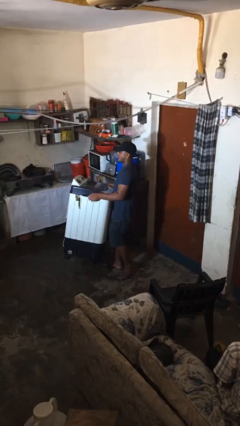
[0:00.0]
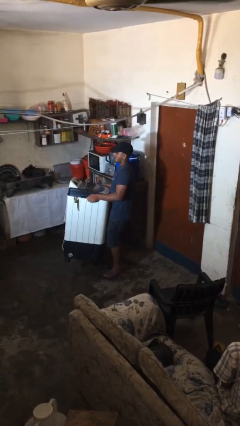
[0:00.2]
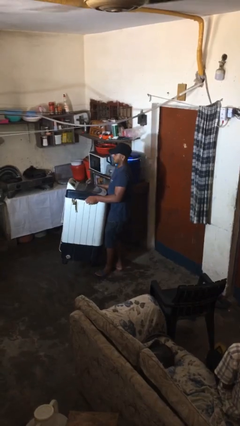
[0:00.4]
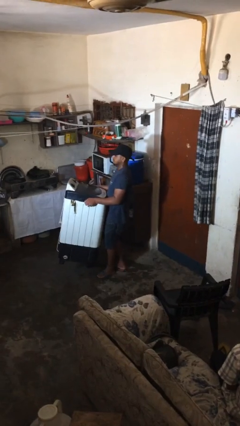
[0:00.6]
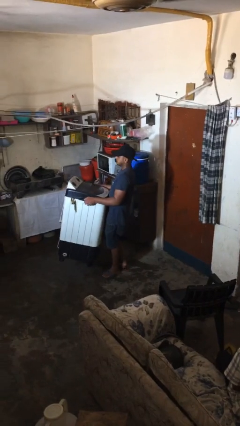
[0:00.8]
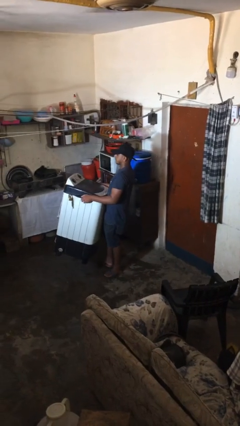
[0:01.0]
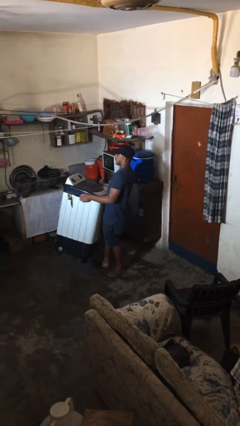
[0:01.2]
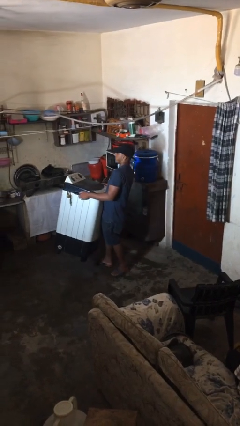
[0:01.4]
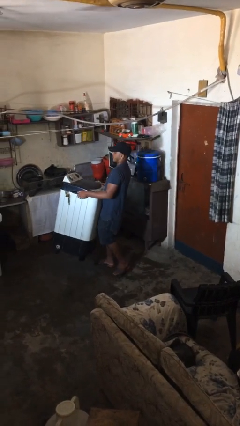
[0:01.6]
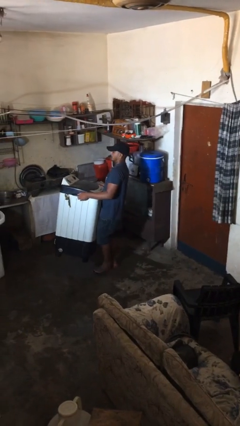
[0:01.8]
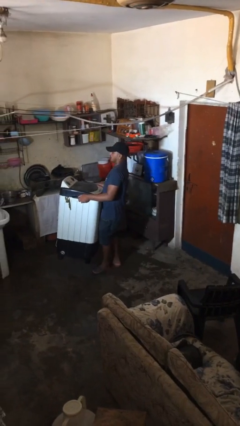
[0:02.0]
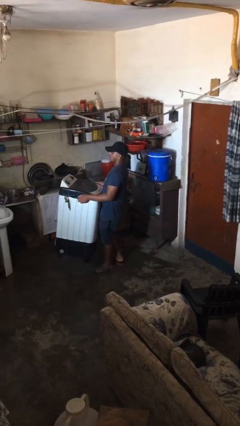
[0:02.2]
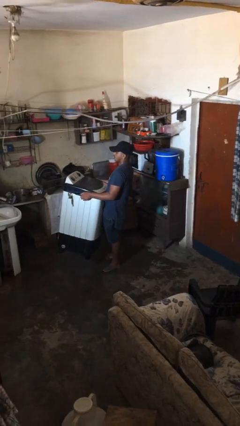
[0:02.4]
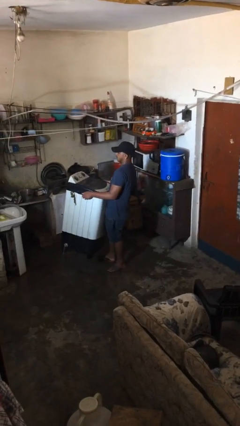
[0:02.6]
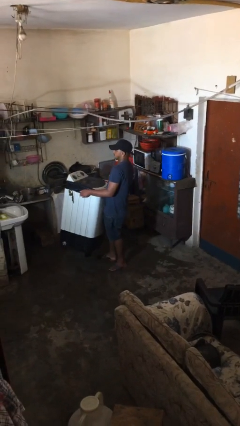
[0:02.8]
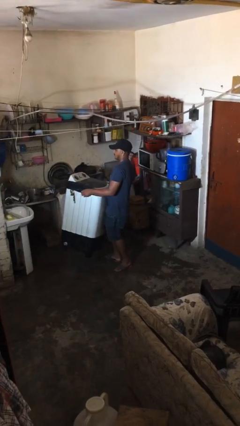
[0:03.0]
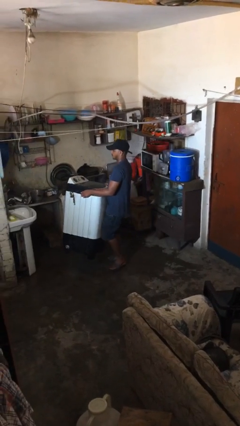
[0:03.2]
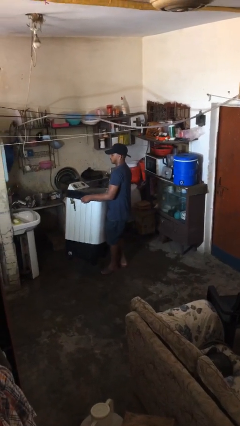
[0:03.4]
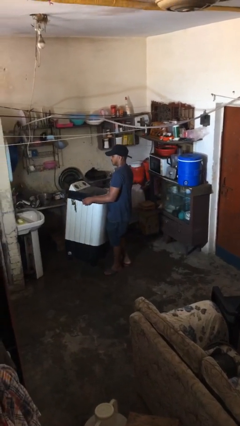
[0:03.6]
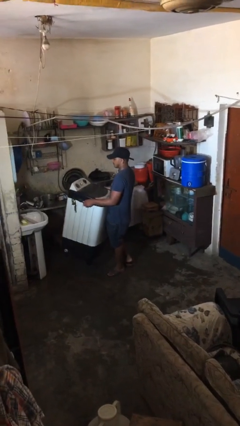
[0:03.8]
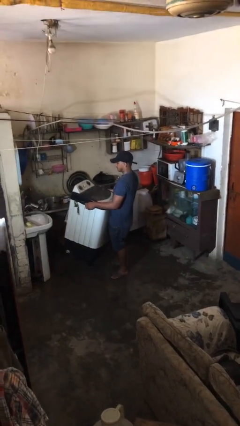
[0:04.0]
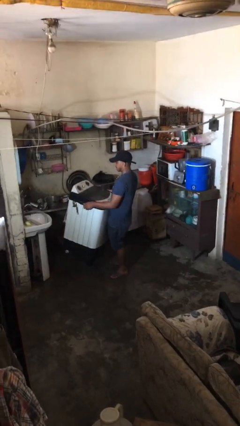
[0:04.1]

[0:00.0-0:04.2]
person carries heavy object

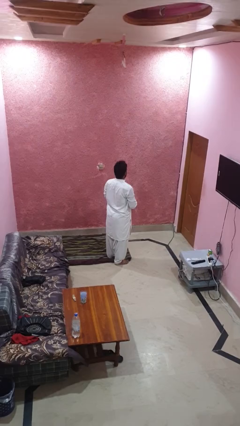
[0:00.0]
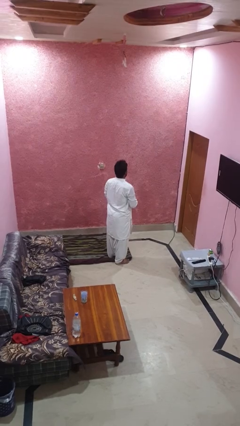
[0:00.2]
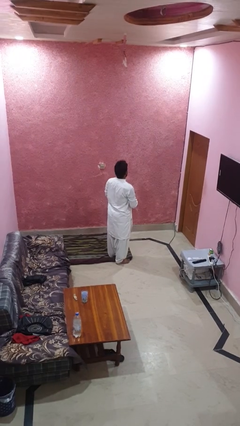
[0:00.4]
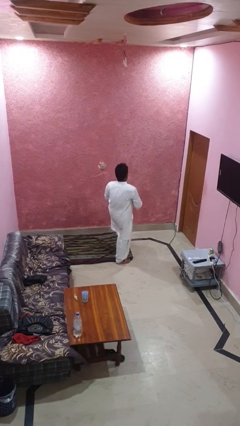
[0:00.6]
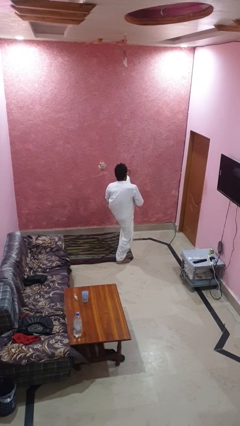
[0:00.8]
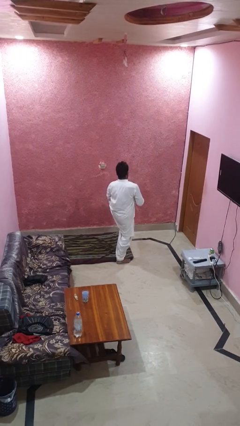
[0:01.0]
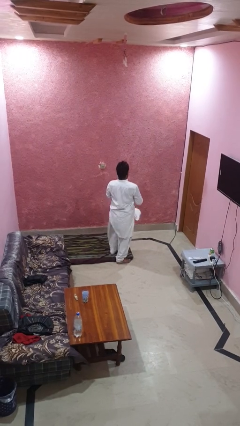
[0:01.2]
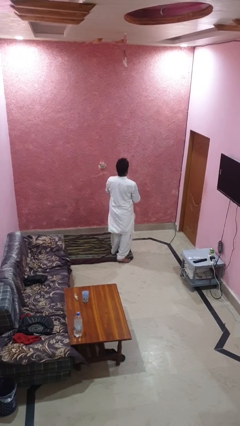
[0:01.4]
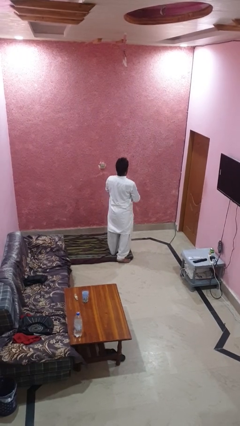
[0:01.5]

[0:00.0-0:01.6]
person karate kicks

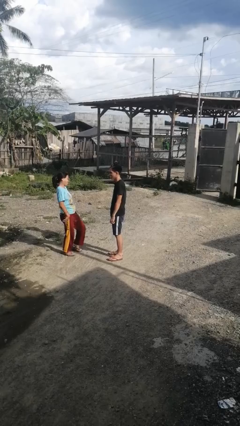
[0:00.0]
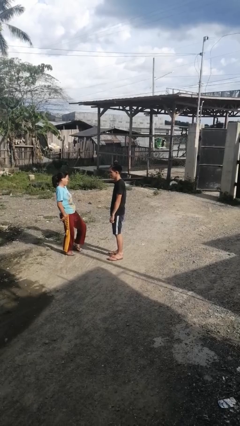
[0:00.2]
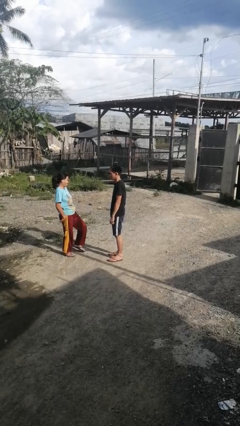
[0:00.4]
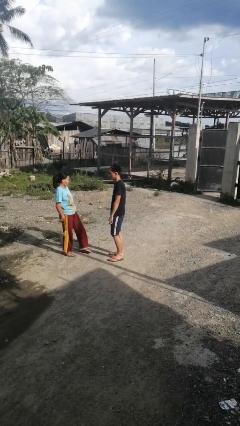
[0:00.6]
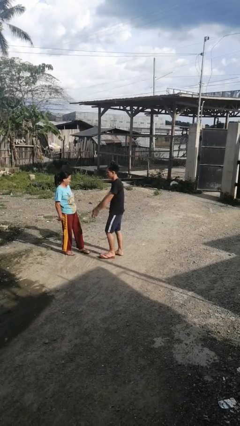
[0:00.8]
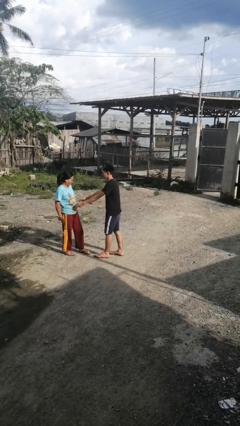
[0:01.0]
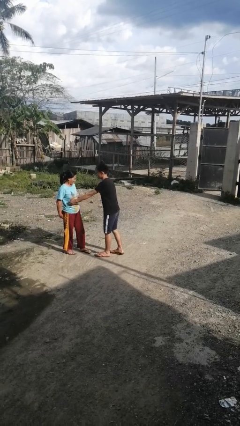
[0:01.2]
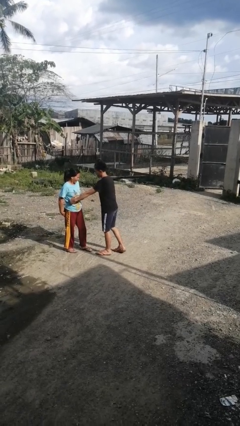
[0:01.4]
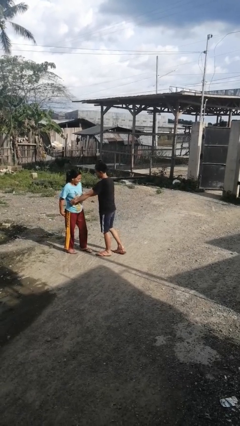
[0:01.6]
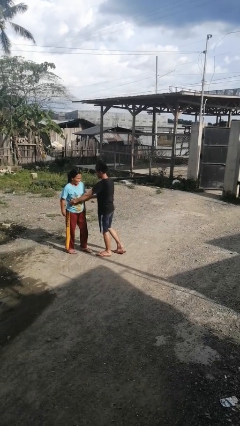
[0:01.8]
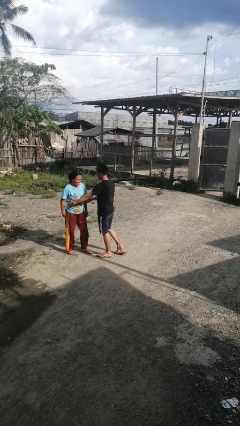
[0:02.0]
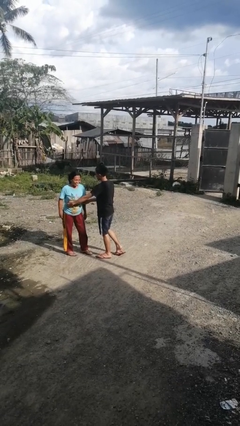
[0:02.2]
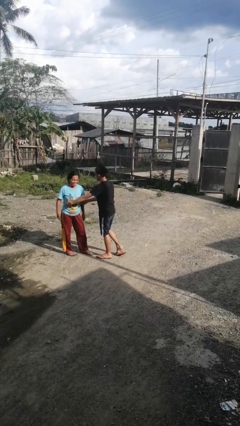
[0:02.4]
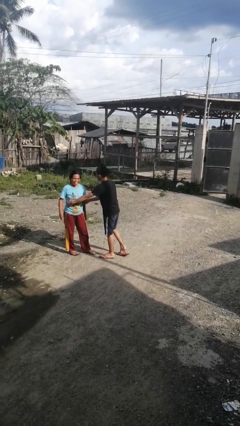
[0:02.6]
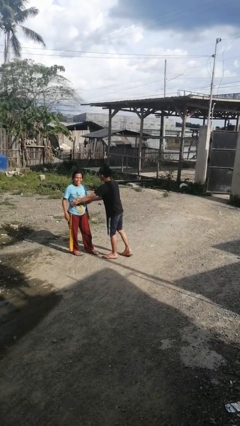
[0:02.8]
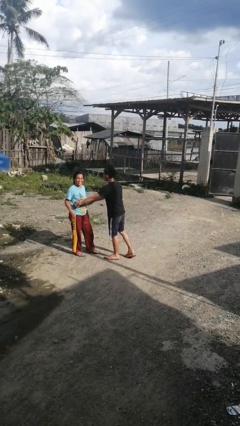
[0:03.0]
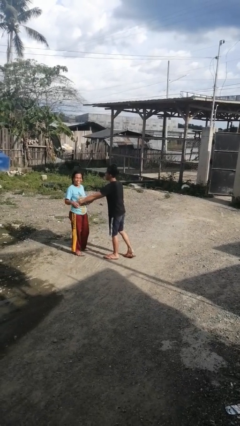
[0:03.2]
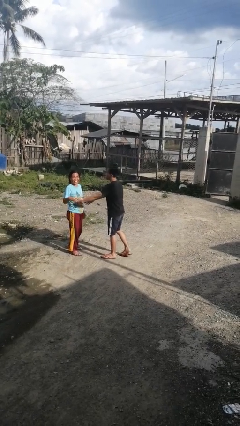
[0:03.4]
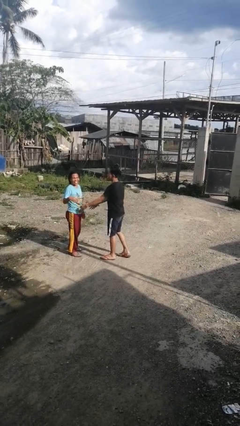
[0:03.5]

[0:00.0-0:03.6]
person tickles person

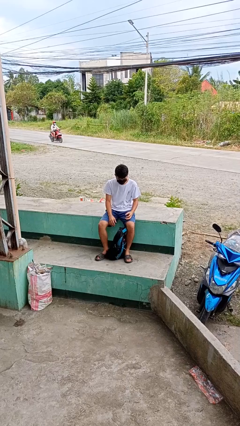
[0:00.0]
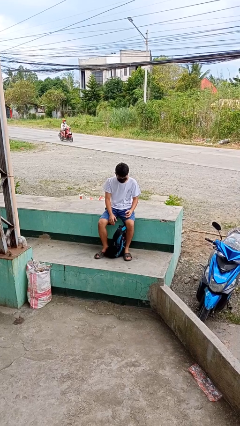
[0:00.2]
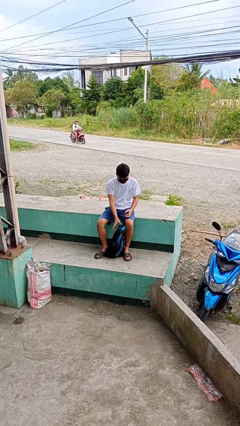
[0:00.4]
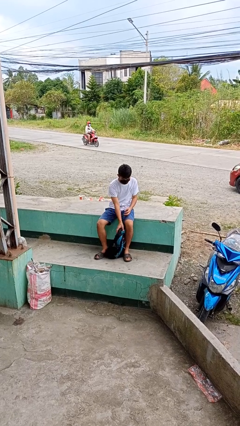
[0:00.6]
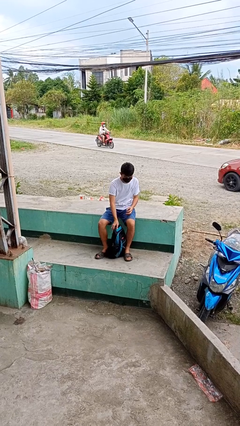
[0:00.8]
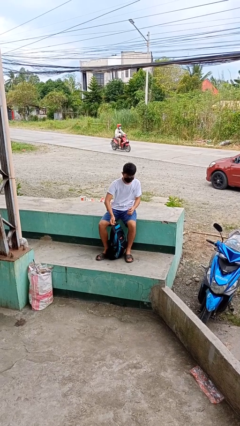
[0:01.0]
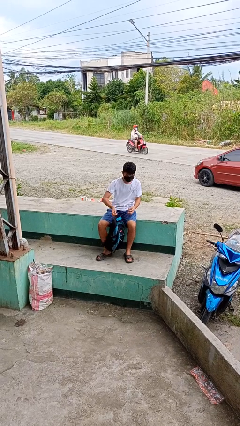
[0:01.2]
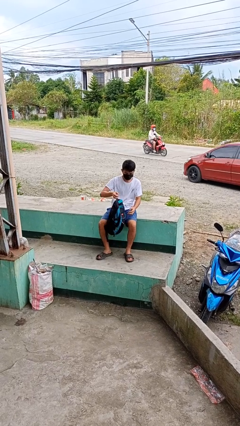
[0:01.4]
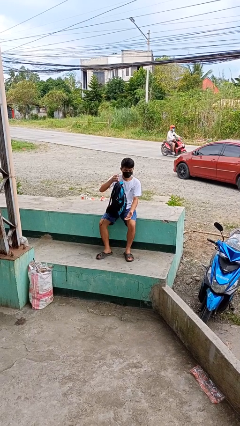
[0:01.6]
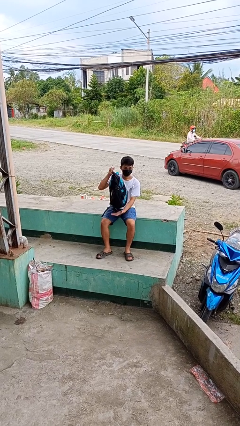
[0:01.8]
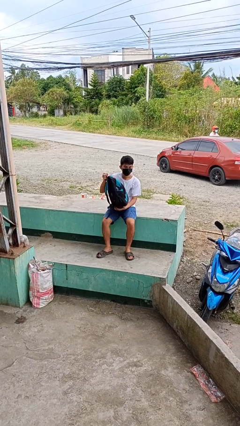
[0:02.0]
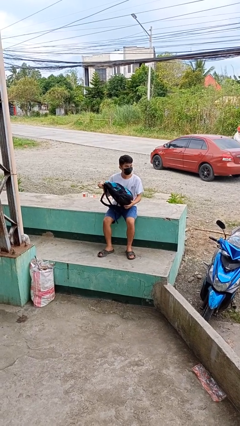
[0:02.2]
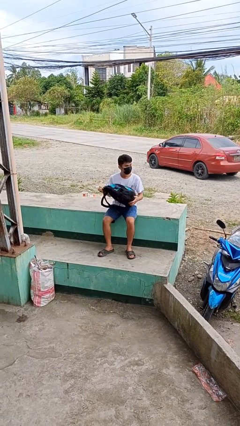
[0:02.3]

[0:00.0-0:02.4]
person picks up object from floor

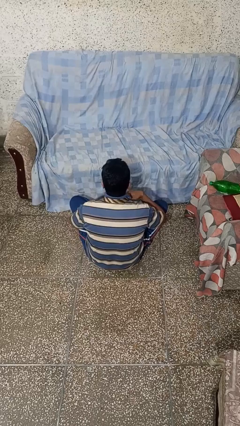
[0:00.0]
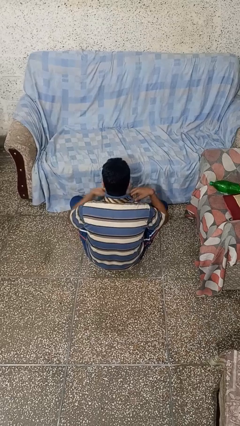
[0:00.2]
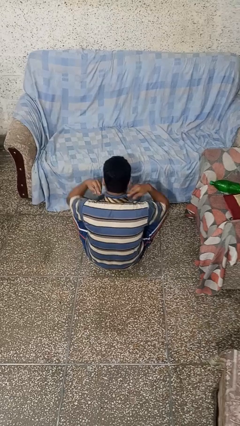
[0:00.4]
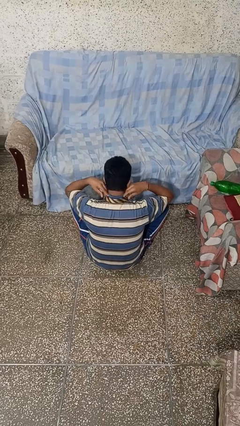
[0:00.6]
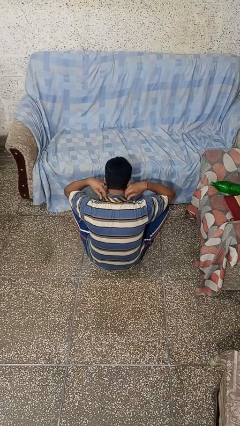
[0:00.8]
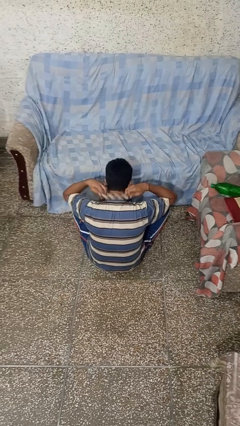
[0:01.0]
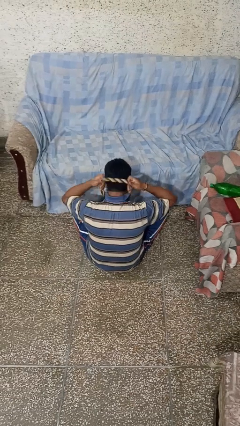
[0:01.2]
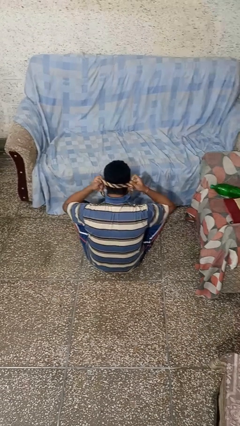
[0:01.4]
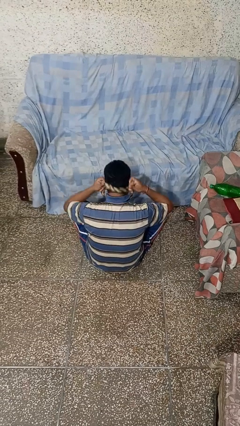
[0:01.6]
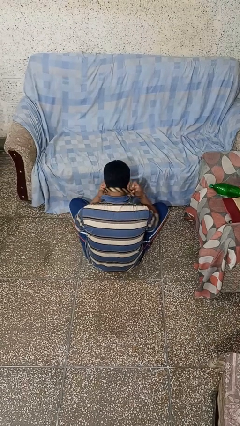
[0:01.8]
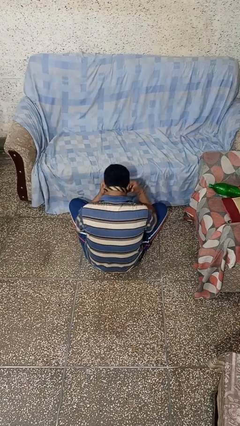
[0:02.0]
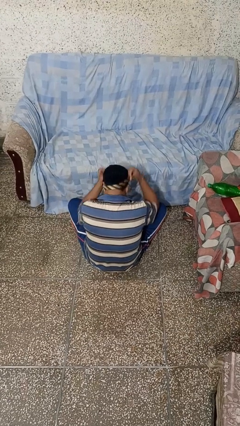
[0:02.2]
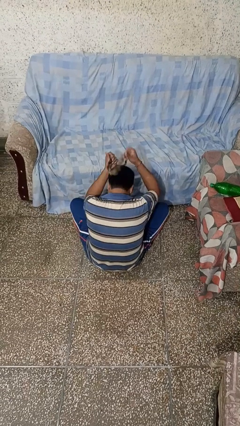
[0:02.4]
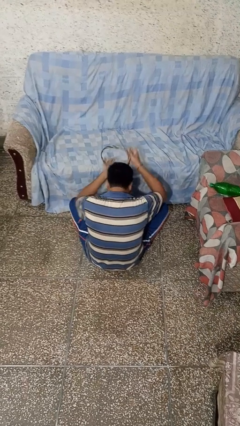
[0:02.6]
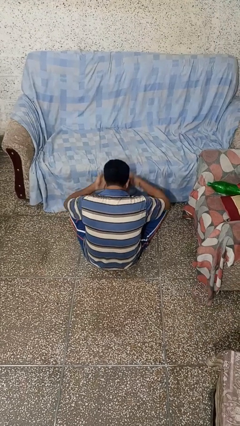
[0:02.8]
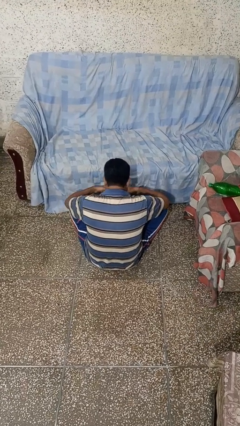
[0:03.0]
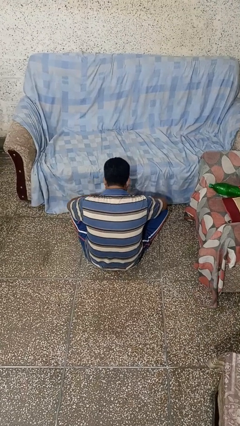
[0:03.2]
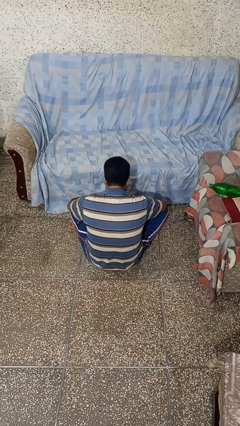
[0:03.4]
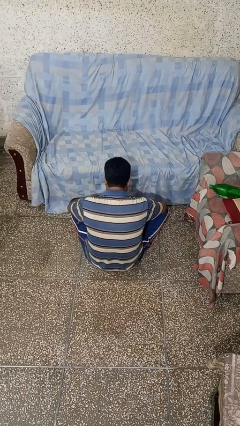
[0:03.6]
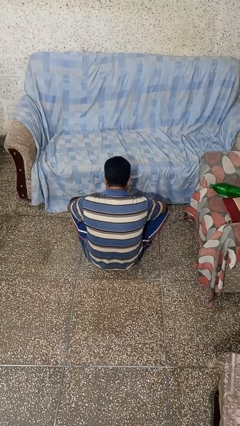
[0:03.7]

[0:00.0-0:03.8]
person takes off necktie

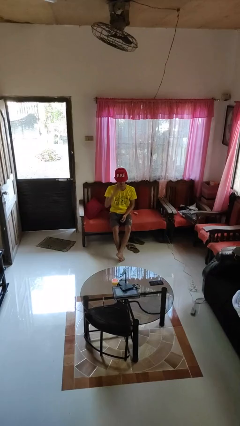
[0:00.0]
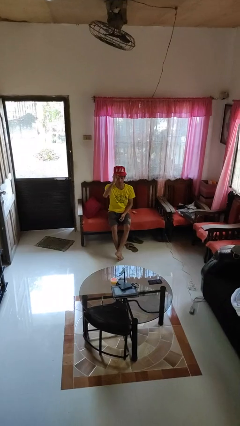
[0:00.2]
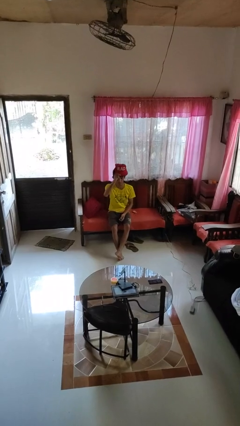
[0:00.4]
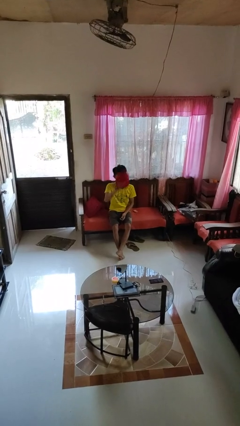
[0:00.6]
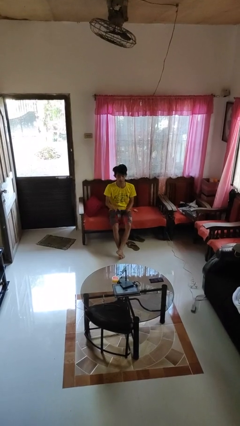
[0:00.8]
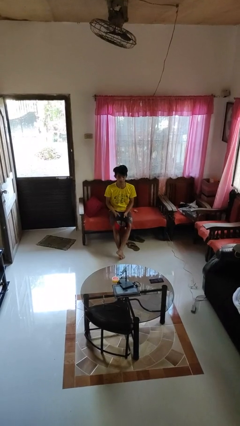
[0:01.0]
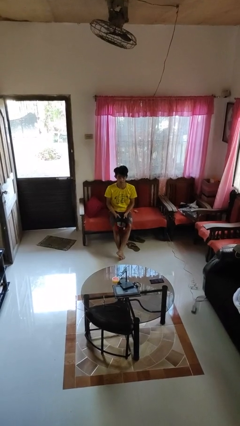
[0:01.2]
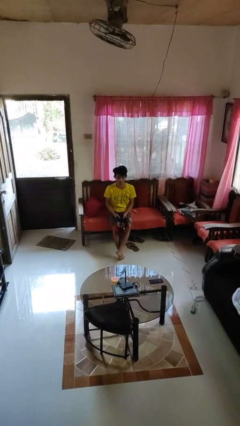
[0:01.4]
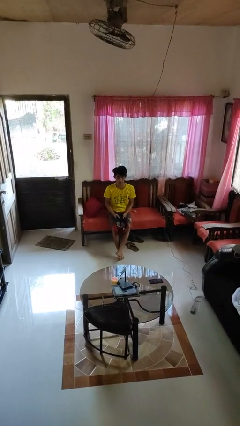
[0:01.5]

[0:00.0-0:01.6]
person takes off hat

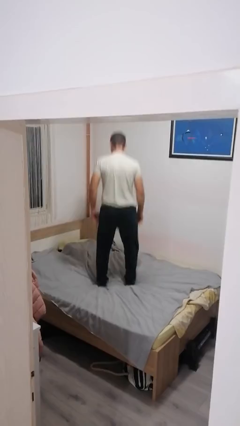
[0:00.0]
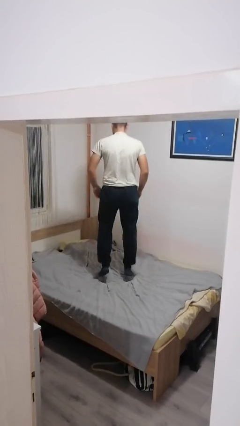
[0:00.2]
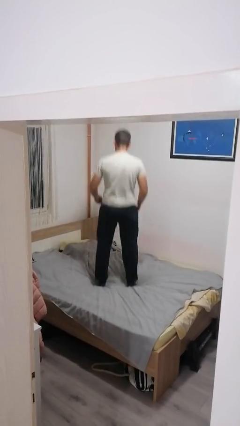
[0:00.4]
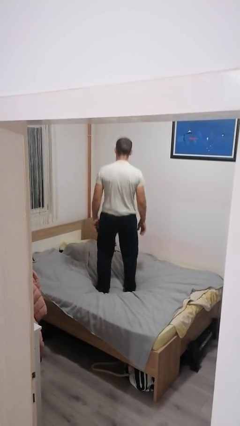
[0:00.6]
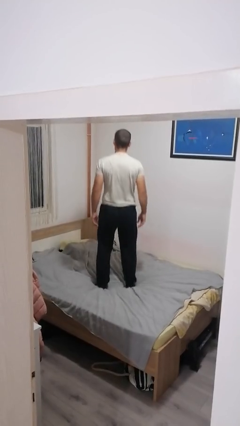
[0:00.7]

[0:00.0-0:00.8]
person jumps on bed
